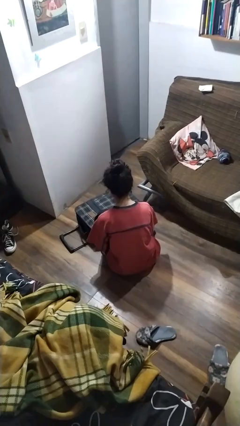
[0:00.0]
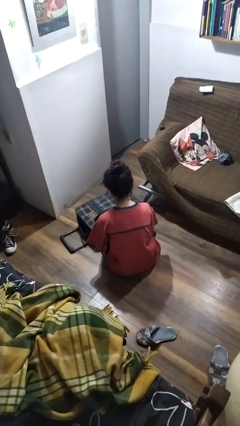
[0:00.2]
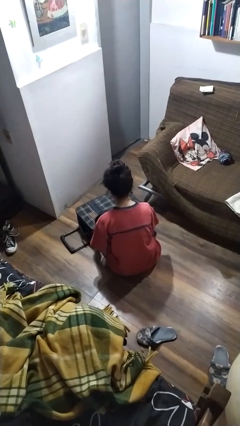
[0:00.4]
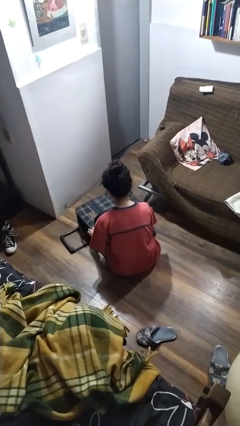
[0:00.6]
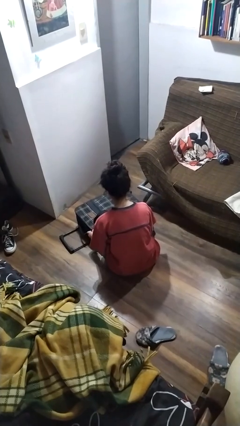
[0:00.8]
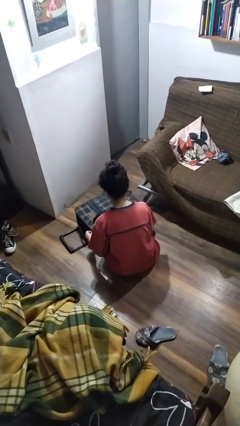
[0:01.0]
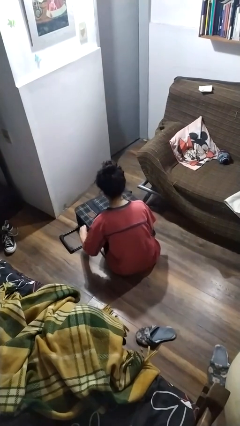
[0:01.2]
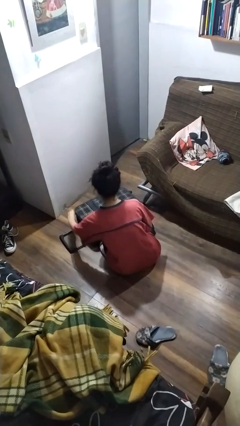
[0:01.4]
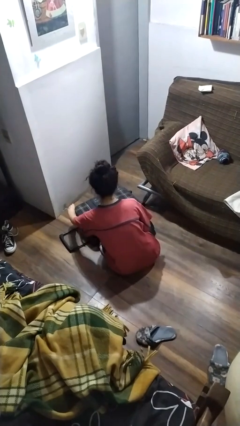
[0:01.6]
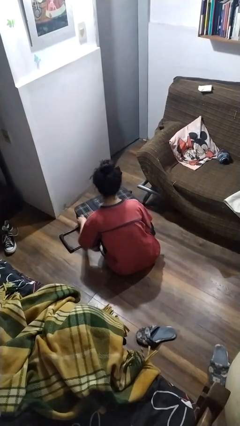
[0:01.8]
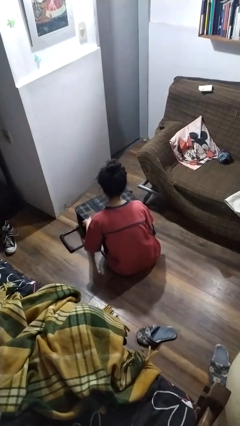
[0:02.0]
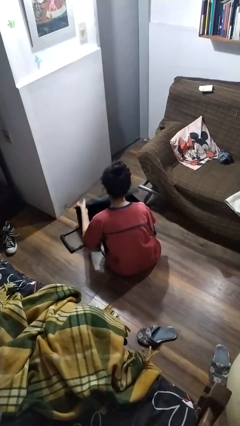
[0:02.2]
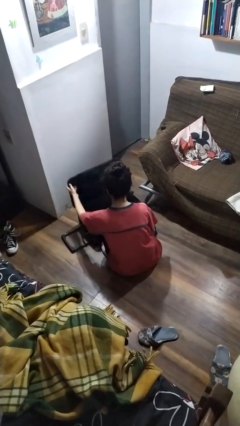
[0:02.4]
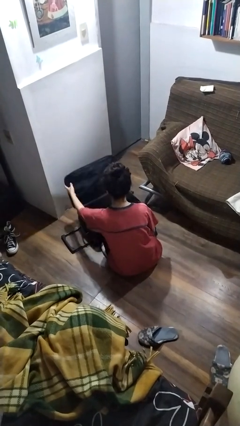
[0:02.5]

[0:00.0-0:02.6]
person opens suitcase

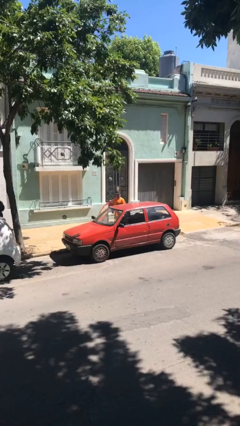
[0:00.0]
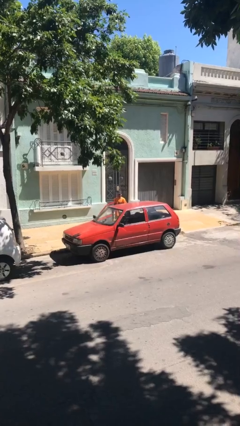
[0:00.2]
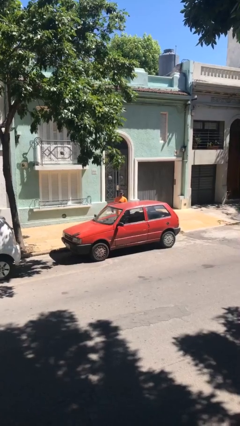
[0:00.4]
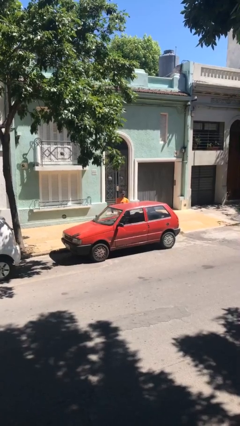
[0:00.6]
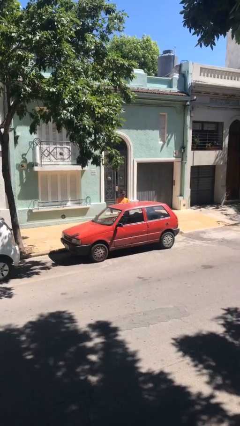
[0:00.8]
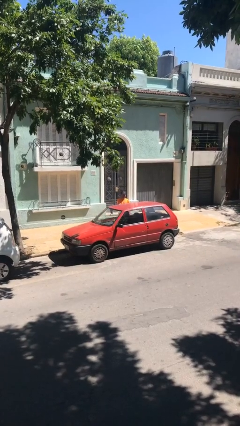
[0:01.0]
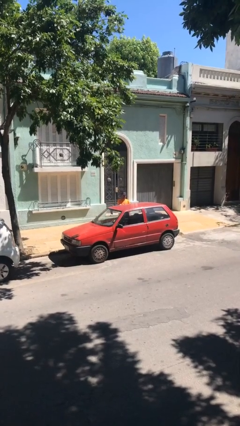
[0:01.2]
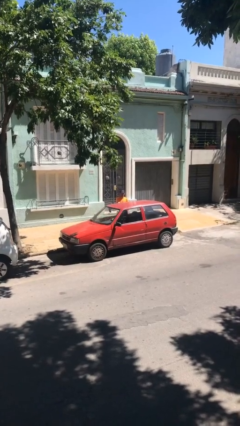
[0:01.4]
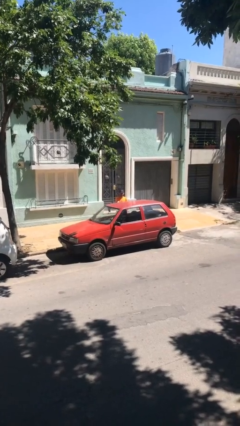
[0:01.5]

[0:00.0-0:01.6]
person closes car door

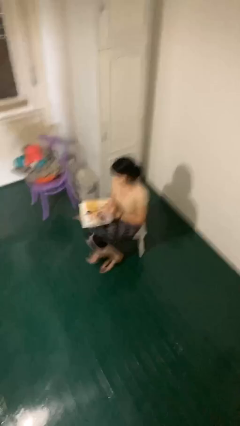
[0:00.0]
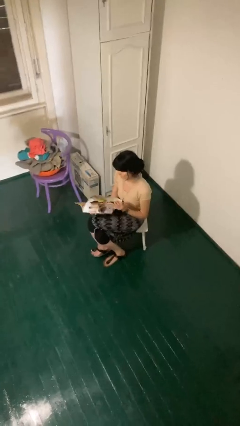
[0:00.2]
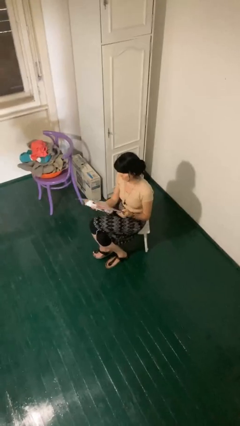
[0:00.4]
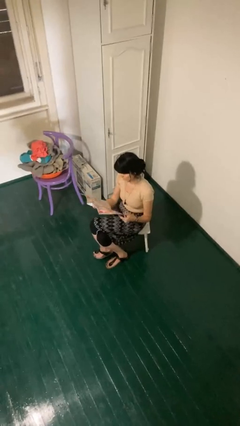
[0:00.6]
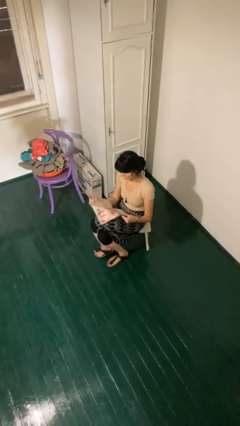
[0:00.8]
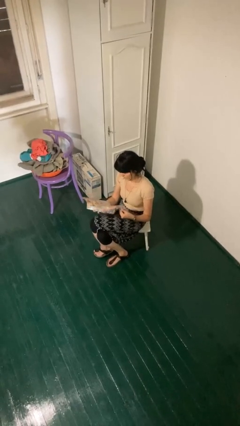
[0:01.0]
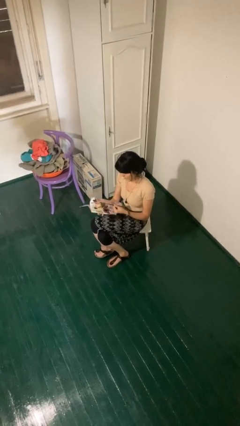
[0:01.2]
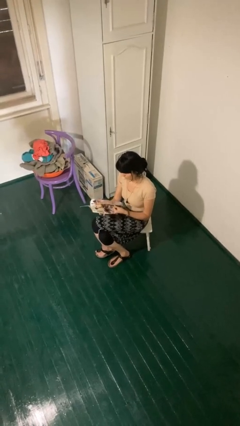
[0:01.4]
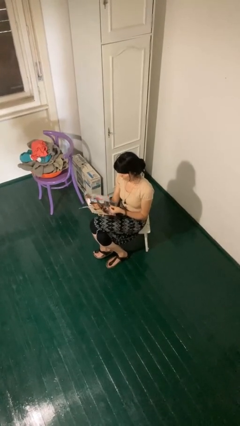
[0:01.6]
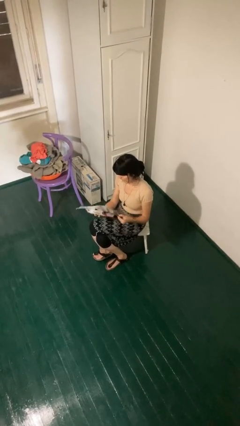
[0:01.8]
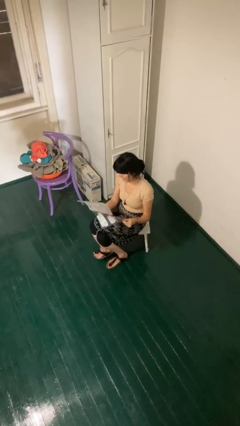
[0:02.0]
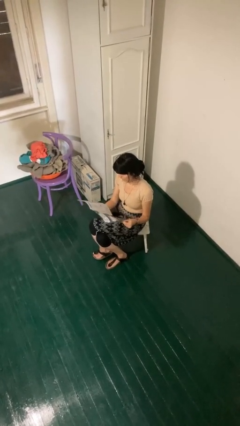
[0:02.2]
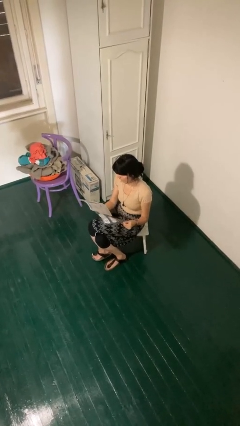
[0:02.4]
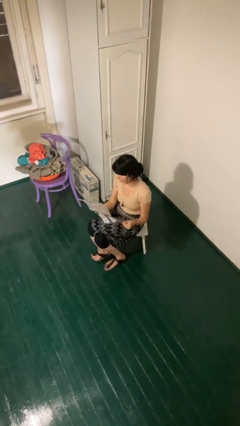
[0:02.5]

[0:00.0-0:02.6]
person reads magazine

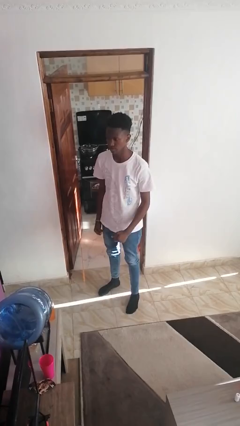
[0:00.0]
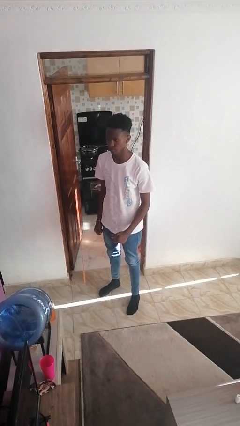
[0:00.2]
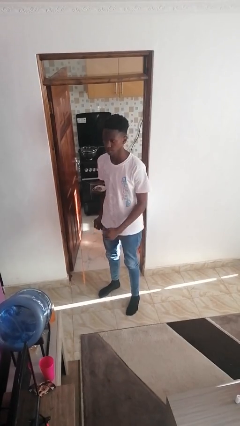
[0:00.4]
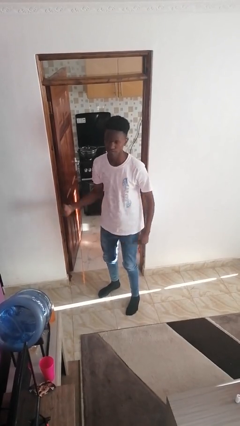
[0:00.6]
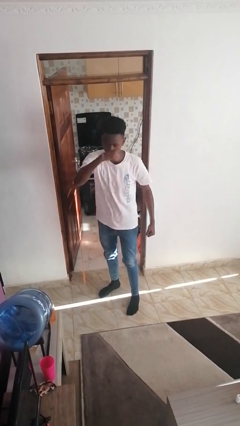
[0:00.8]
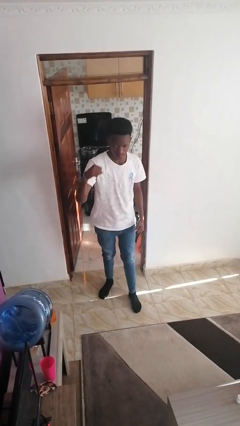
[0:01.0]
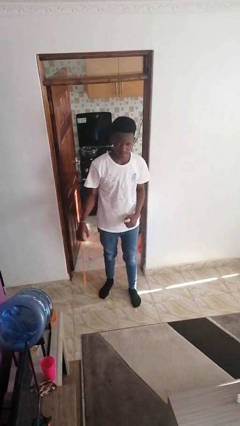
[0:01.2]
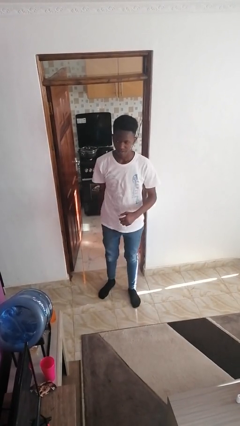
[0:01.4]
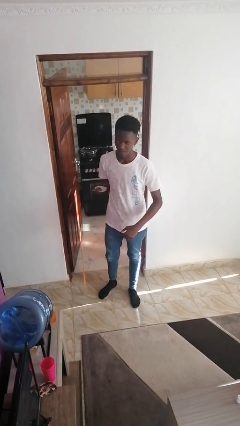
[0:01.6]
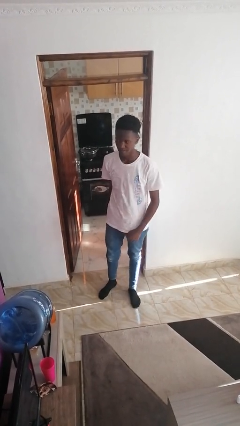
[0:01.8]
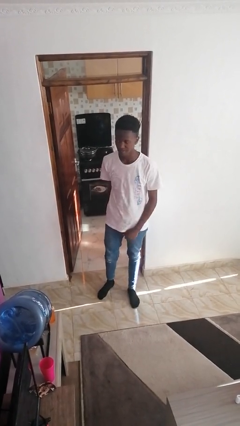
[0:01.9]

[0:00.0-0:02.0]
person punches

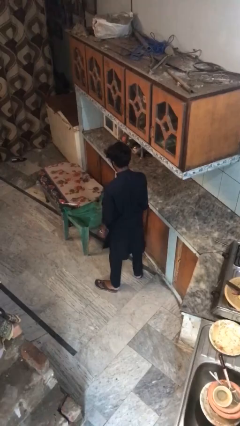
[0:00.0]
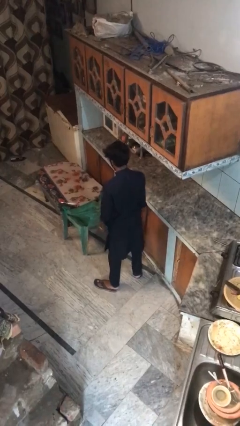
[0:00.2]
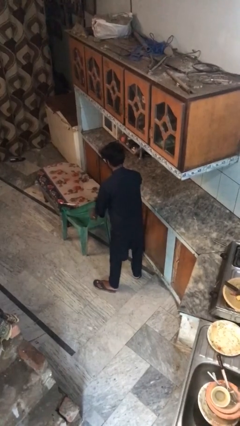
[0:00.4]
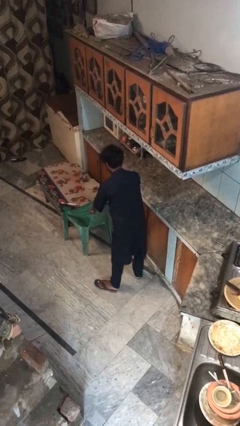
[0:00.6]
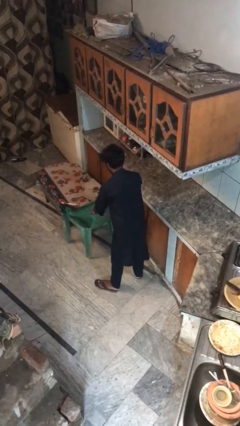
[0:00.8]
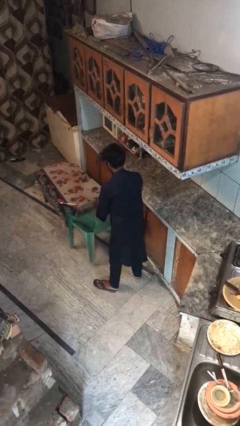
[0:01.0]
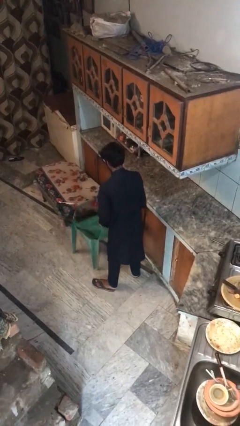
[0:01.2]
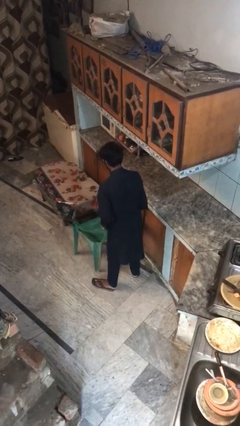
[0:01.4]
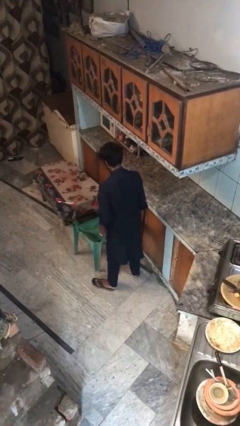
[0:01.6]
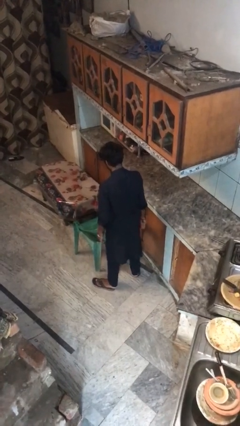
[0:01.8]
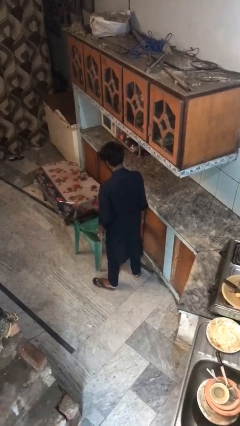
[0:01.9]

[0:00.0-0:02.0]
person pulls out chair

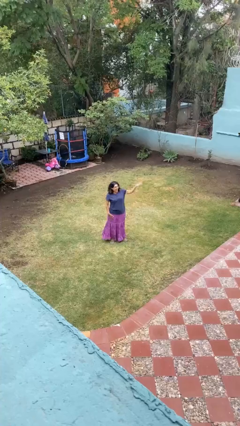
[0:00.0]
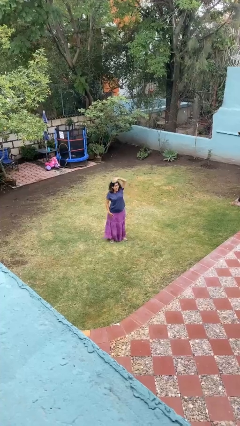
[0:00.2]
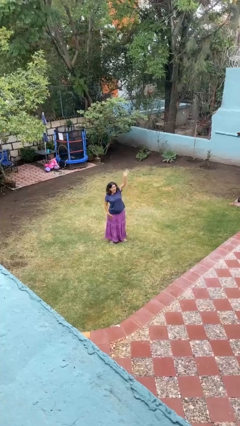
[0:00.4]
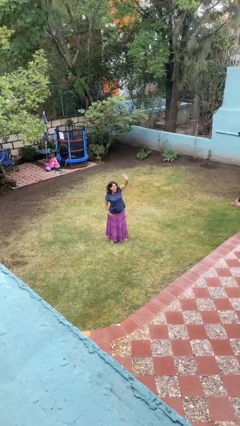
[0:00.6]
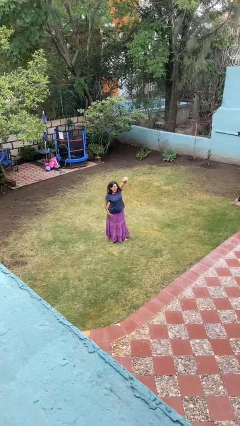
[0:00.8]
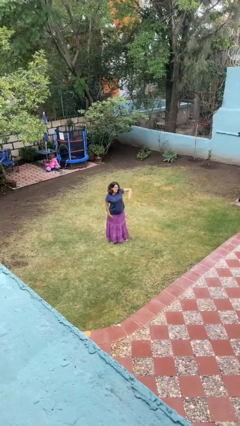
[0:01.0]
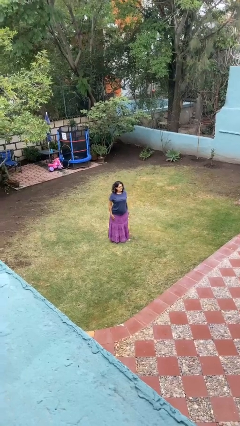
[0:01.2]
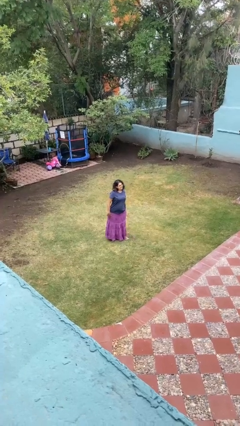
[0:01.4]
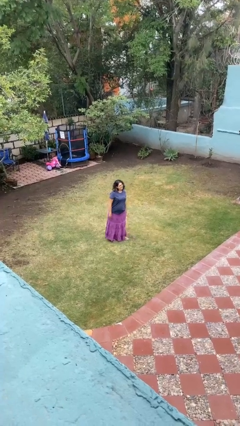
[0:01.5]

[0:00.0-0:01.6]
person waves at person

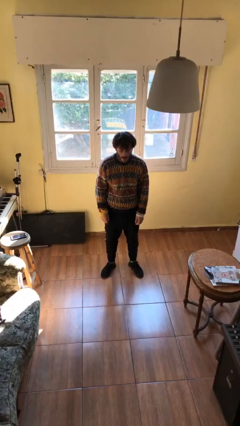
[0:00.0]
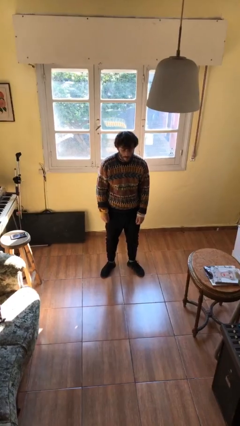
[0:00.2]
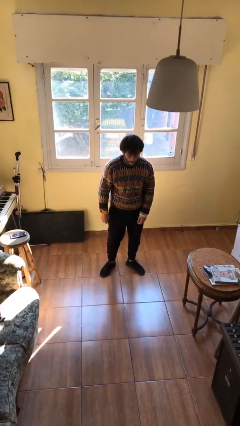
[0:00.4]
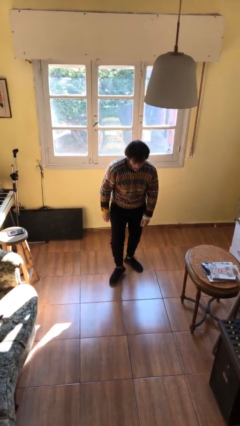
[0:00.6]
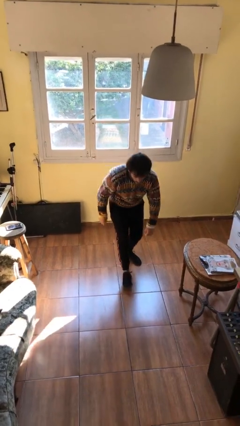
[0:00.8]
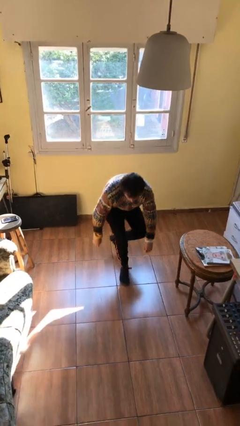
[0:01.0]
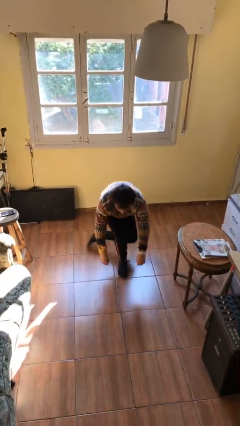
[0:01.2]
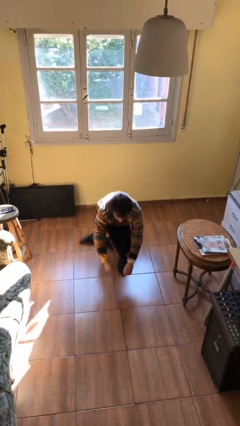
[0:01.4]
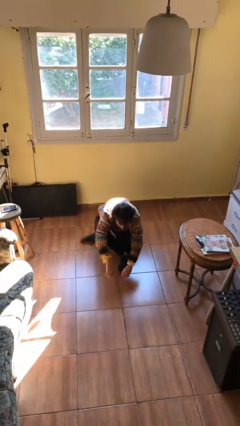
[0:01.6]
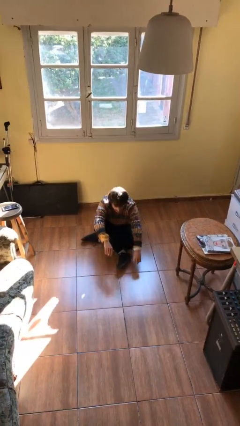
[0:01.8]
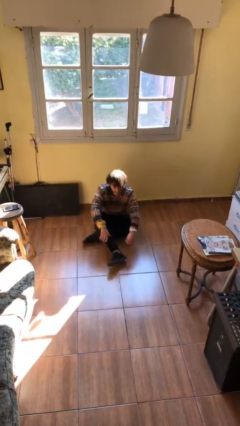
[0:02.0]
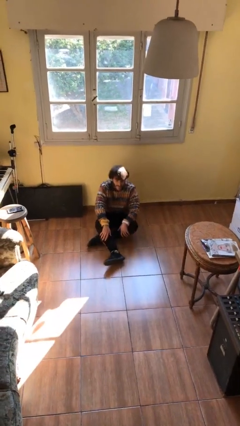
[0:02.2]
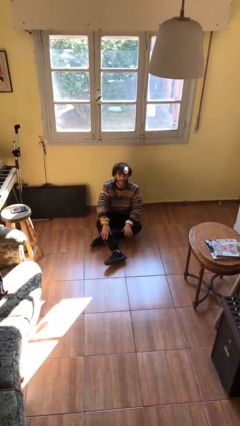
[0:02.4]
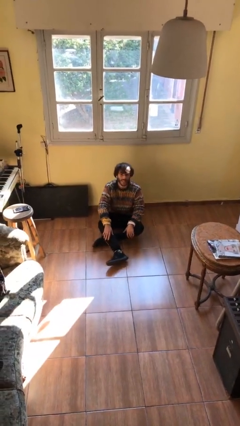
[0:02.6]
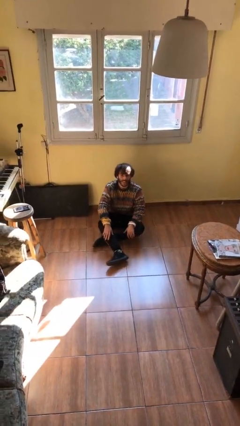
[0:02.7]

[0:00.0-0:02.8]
person sits crisscross

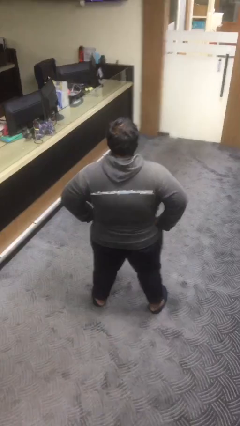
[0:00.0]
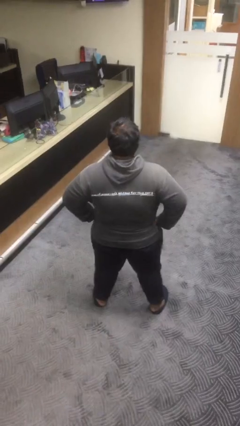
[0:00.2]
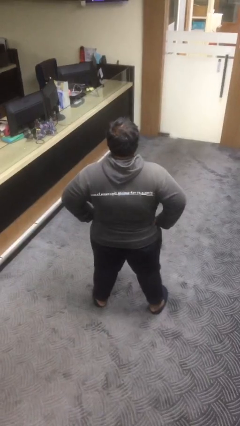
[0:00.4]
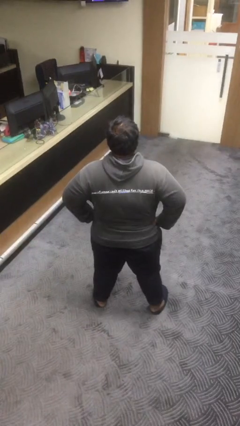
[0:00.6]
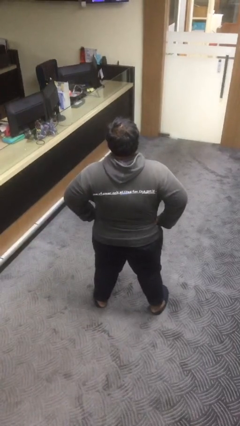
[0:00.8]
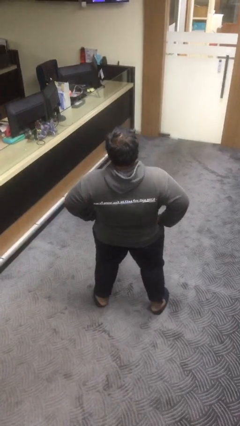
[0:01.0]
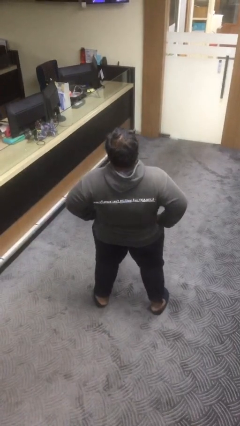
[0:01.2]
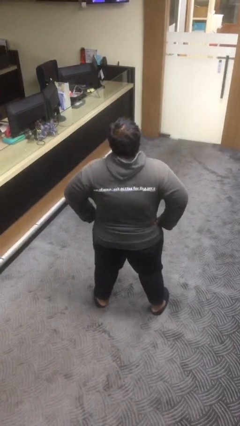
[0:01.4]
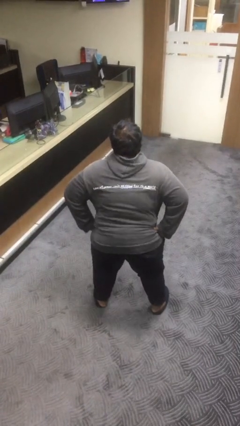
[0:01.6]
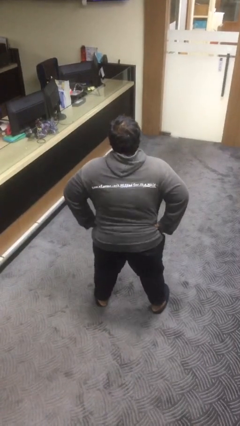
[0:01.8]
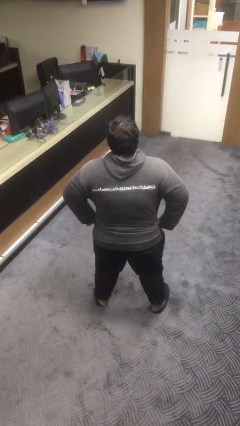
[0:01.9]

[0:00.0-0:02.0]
person wiggles hips
